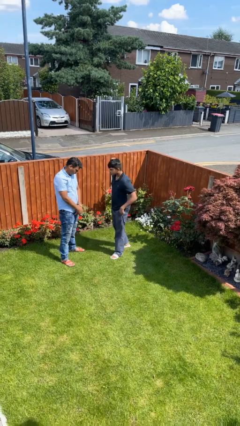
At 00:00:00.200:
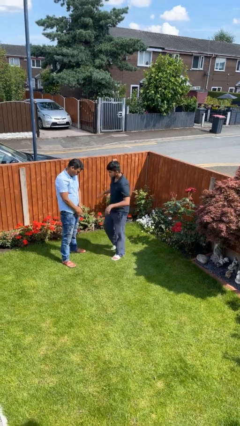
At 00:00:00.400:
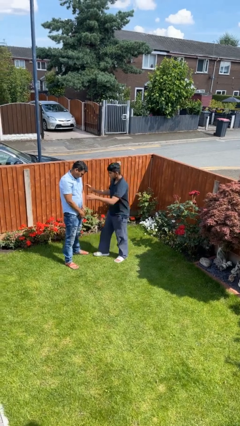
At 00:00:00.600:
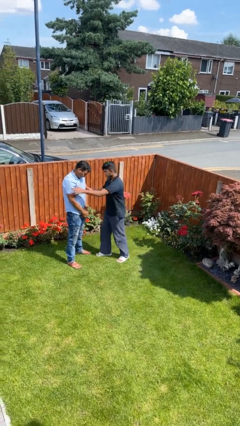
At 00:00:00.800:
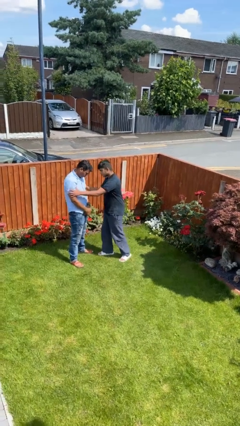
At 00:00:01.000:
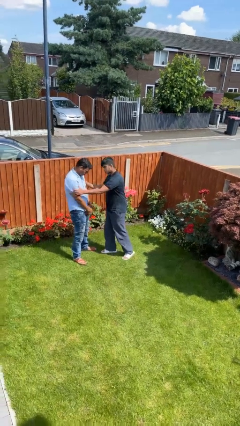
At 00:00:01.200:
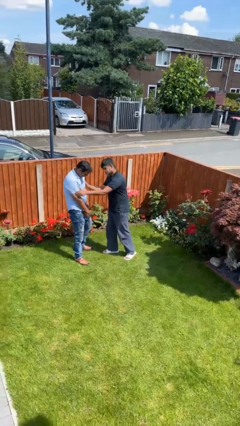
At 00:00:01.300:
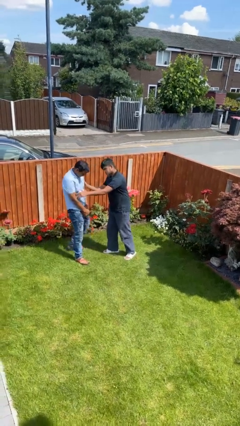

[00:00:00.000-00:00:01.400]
person shoves person

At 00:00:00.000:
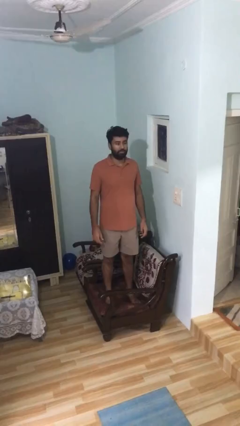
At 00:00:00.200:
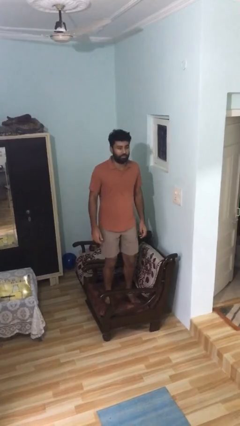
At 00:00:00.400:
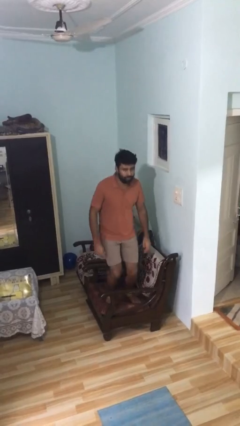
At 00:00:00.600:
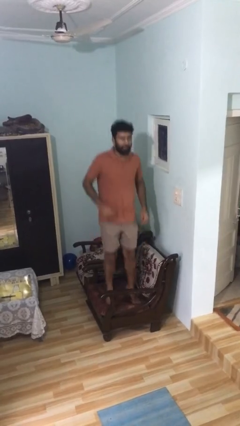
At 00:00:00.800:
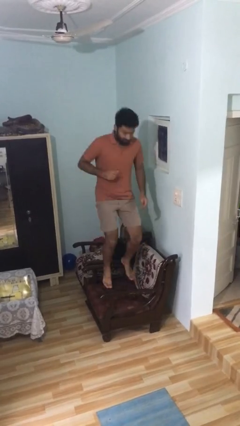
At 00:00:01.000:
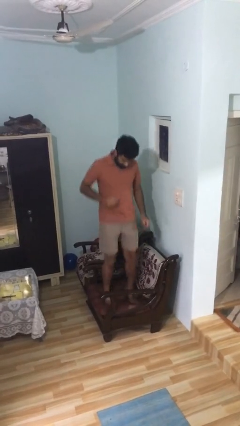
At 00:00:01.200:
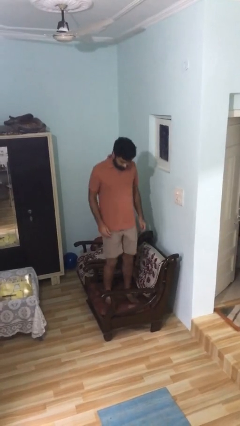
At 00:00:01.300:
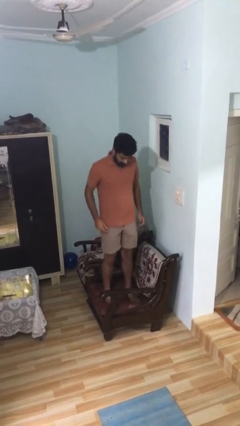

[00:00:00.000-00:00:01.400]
person jumps on couch

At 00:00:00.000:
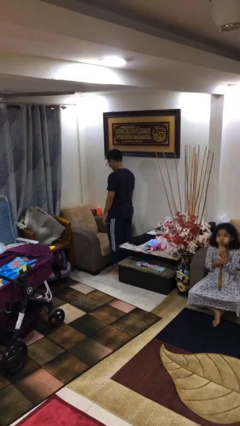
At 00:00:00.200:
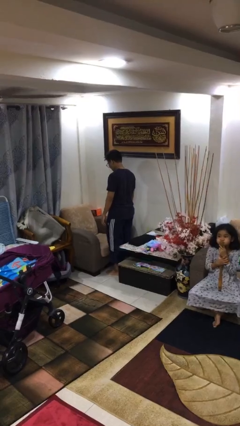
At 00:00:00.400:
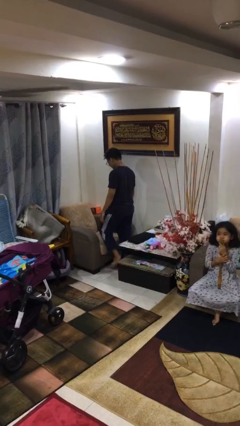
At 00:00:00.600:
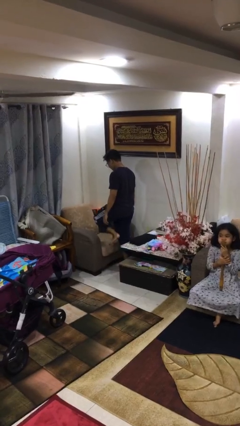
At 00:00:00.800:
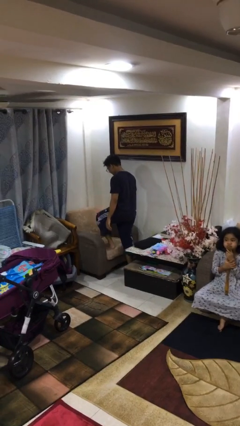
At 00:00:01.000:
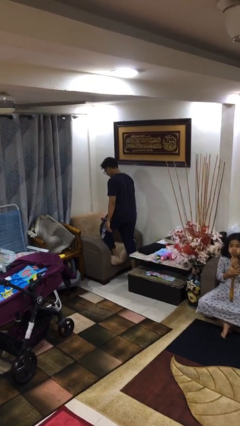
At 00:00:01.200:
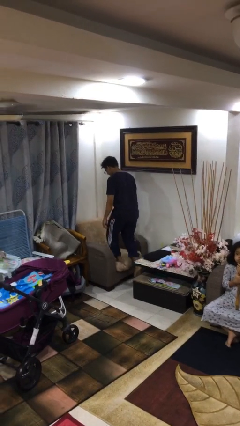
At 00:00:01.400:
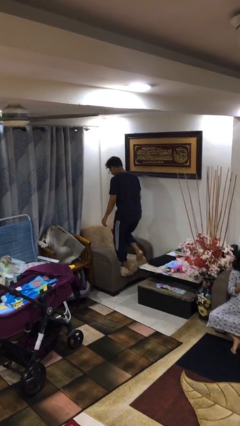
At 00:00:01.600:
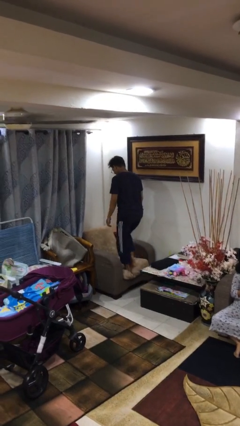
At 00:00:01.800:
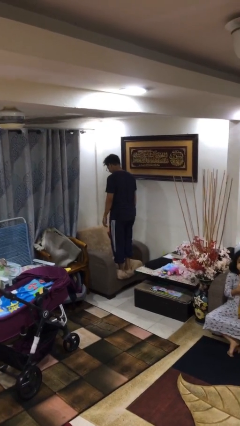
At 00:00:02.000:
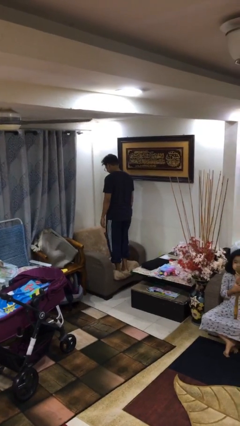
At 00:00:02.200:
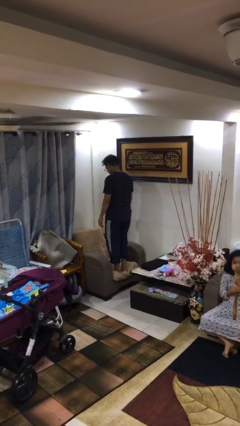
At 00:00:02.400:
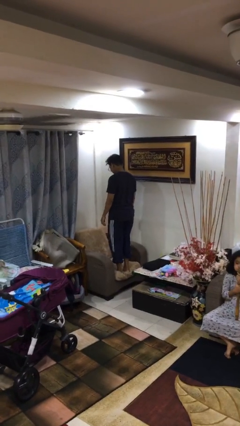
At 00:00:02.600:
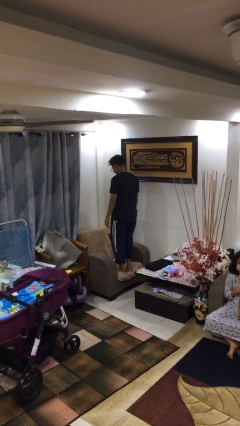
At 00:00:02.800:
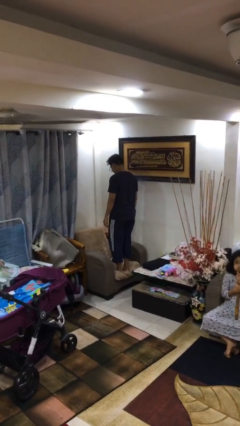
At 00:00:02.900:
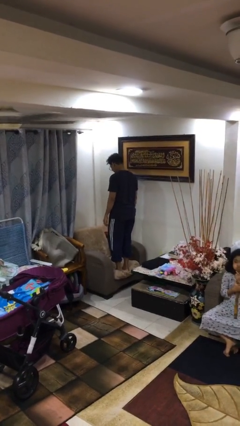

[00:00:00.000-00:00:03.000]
person climbs on couch

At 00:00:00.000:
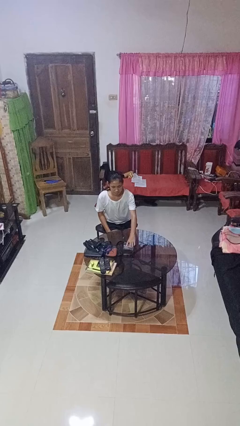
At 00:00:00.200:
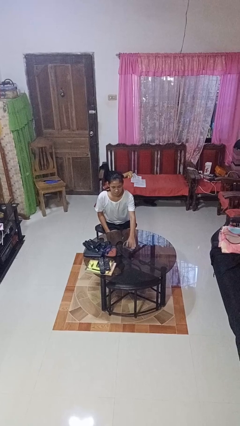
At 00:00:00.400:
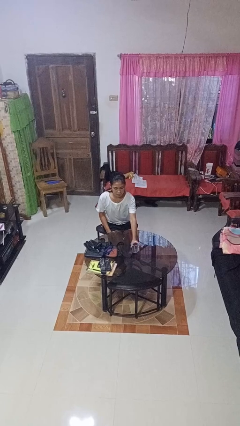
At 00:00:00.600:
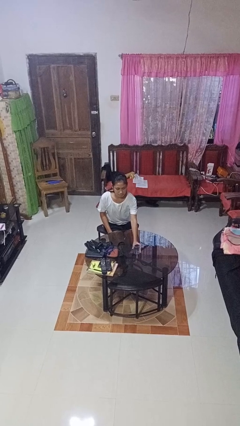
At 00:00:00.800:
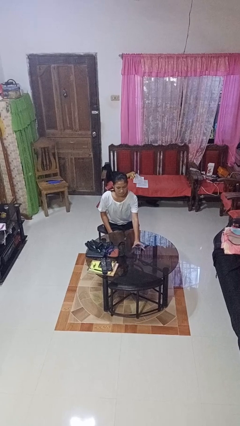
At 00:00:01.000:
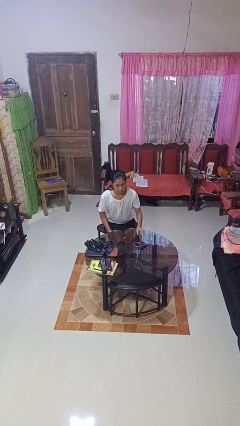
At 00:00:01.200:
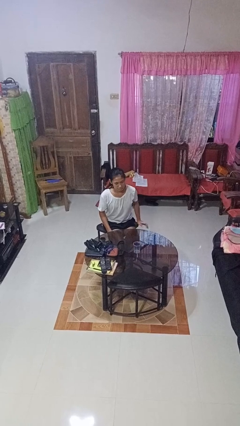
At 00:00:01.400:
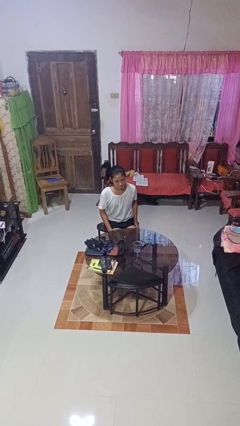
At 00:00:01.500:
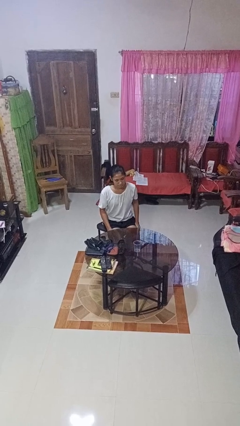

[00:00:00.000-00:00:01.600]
person sets upright glass

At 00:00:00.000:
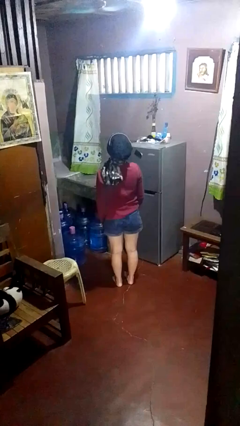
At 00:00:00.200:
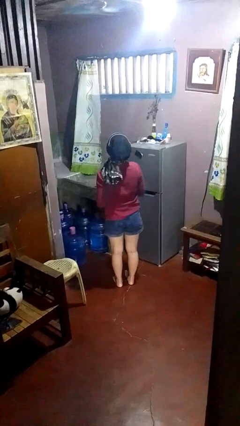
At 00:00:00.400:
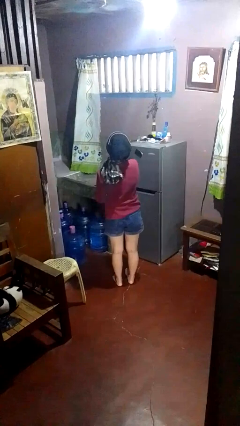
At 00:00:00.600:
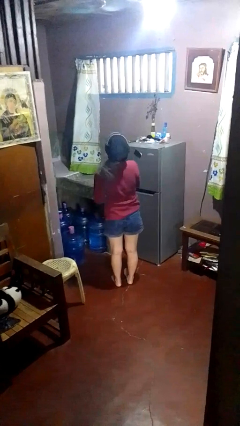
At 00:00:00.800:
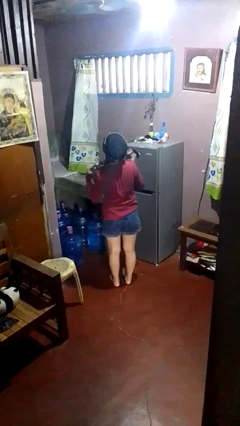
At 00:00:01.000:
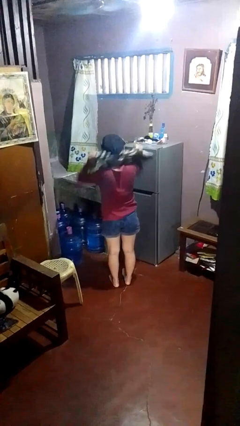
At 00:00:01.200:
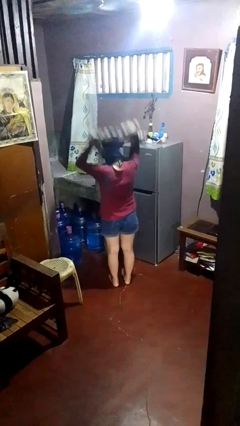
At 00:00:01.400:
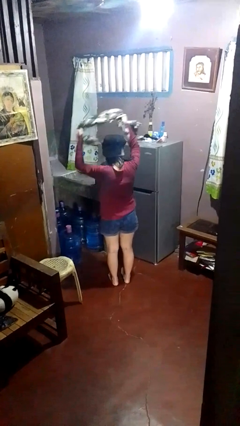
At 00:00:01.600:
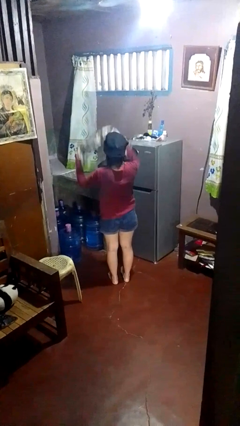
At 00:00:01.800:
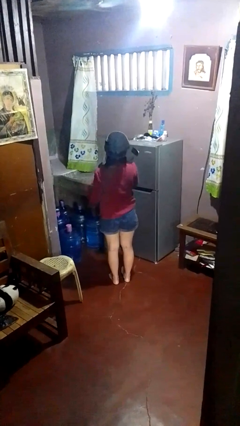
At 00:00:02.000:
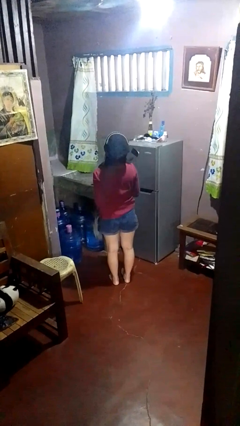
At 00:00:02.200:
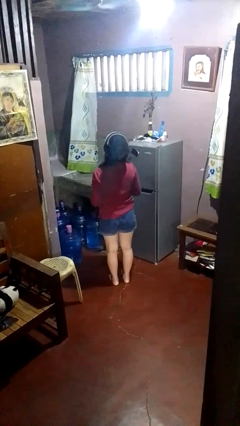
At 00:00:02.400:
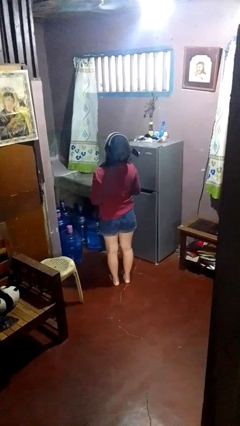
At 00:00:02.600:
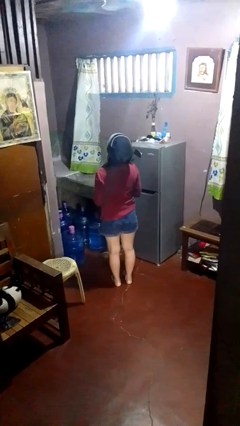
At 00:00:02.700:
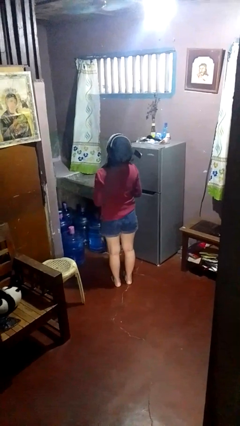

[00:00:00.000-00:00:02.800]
person takes off scarf

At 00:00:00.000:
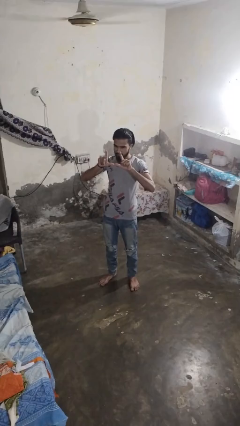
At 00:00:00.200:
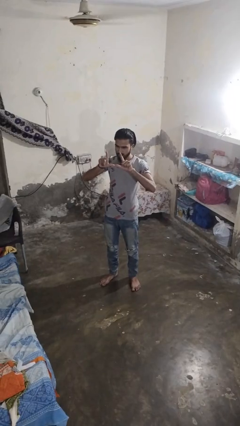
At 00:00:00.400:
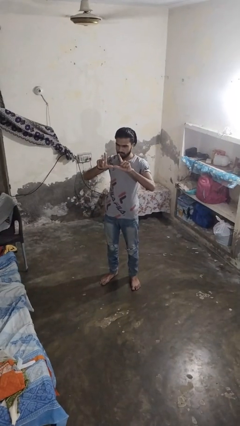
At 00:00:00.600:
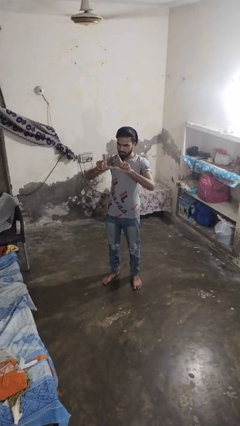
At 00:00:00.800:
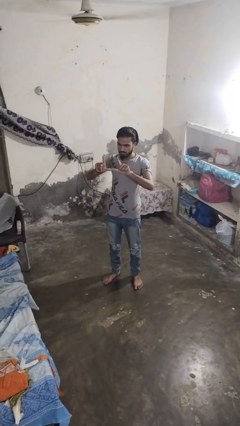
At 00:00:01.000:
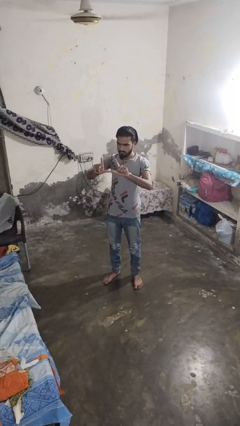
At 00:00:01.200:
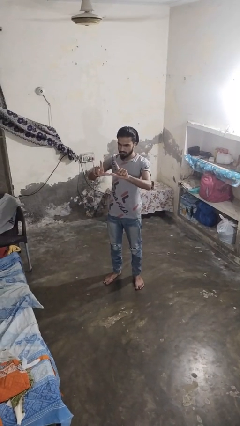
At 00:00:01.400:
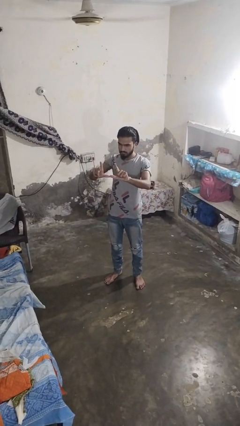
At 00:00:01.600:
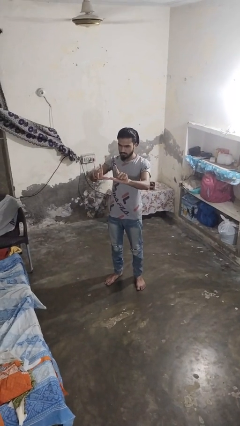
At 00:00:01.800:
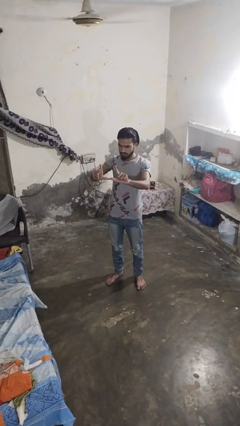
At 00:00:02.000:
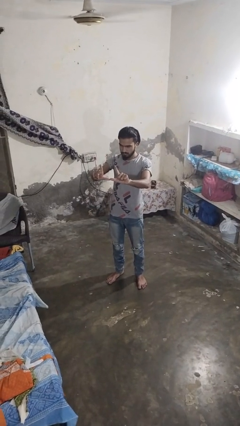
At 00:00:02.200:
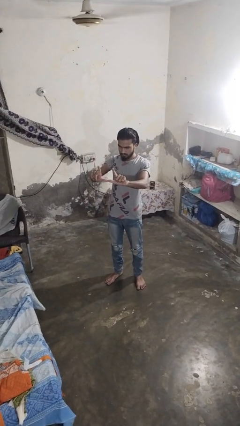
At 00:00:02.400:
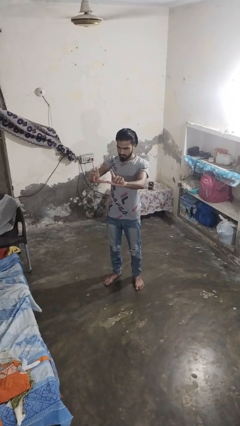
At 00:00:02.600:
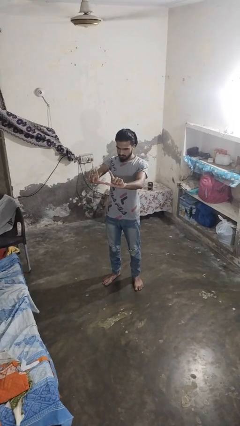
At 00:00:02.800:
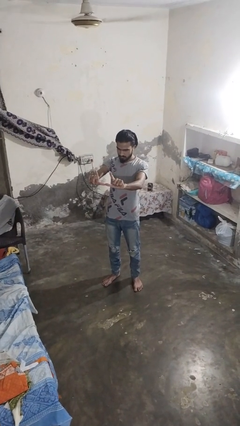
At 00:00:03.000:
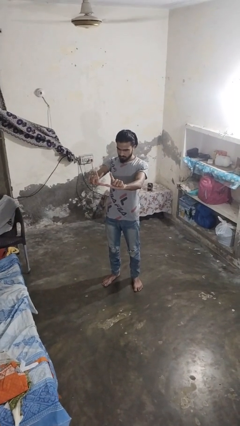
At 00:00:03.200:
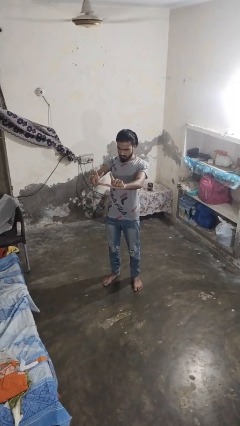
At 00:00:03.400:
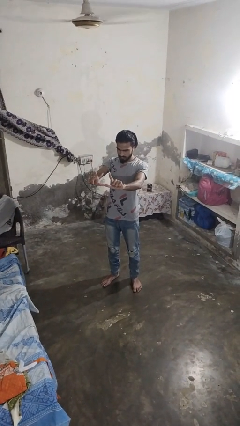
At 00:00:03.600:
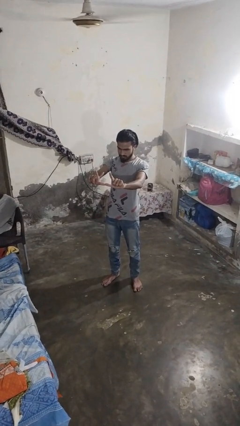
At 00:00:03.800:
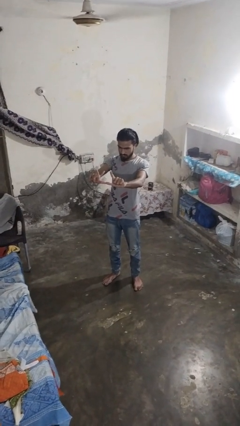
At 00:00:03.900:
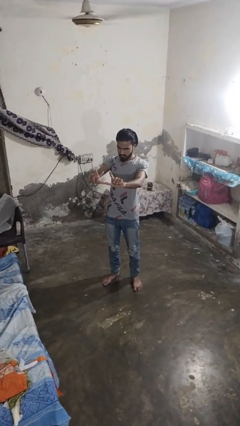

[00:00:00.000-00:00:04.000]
person gestures zoom out

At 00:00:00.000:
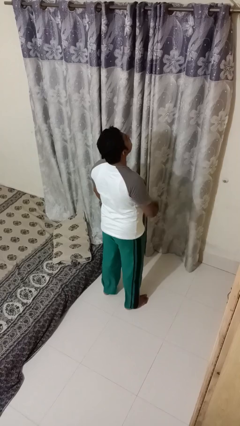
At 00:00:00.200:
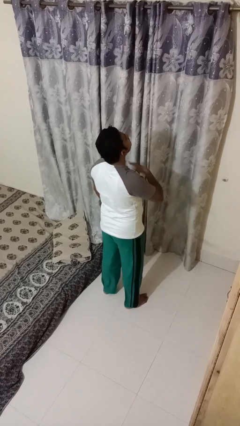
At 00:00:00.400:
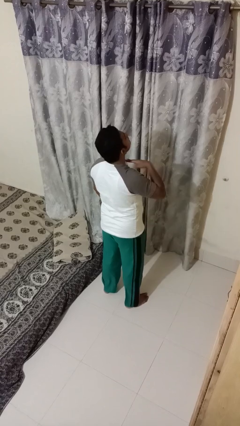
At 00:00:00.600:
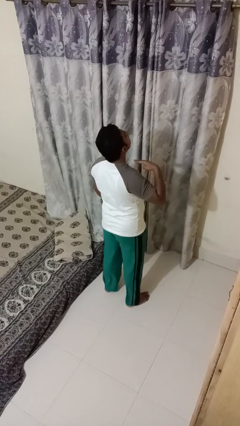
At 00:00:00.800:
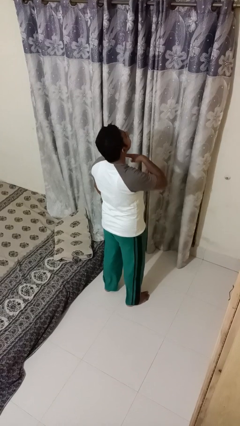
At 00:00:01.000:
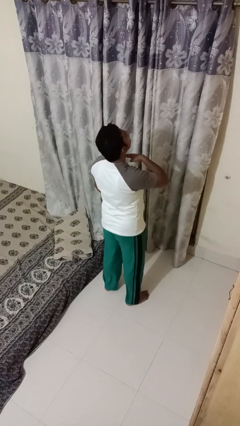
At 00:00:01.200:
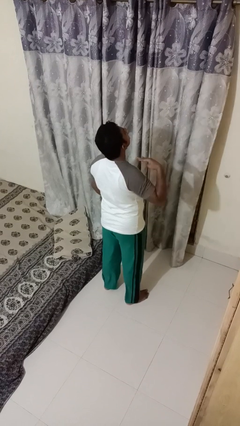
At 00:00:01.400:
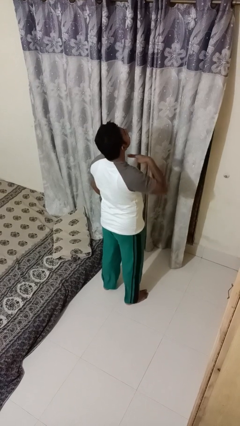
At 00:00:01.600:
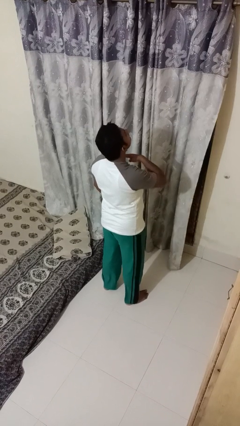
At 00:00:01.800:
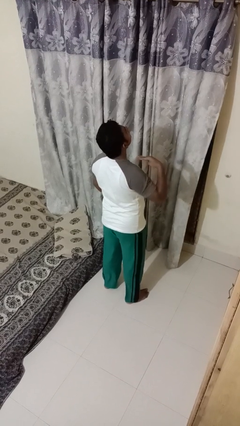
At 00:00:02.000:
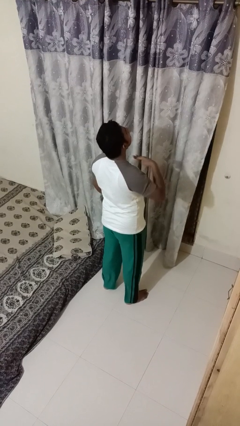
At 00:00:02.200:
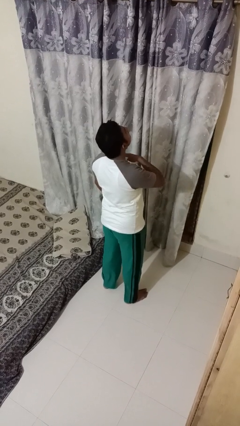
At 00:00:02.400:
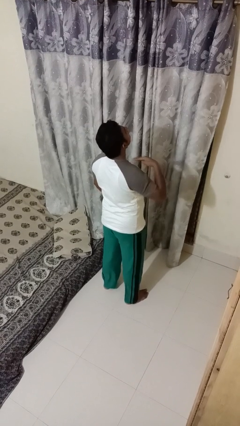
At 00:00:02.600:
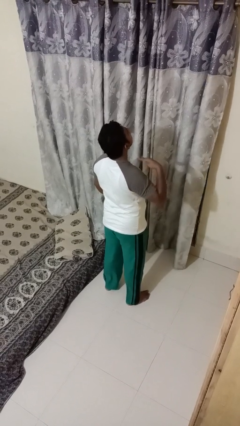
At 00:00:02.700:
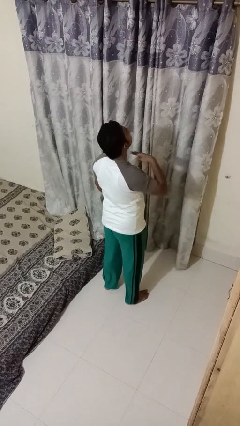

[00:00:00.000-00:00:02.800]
person gestures cut
